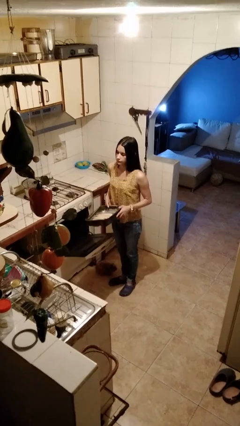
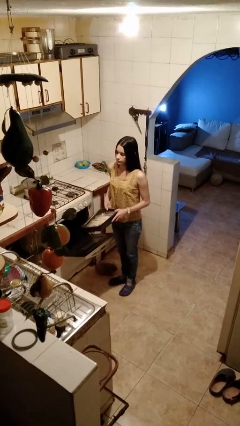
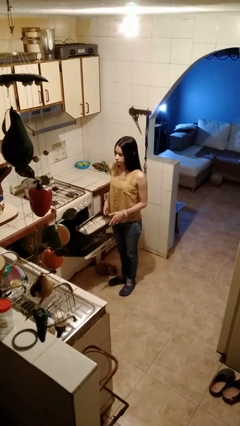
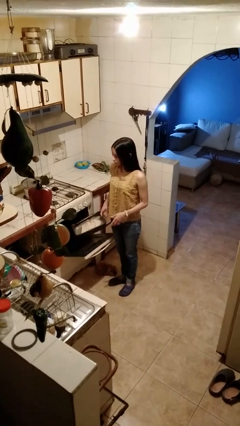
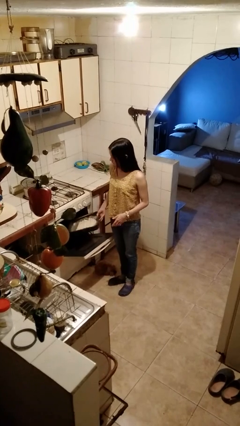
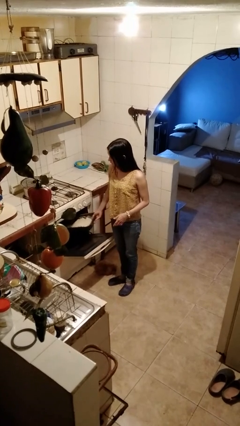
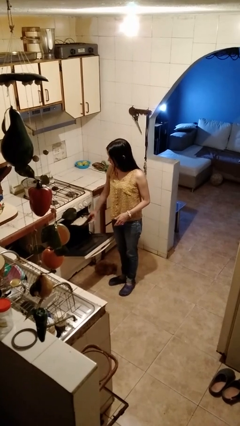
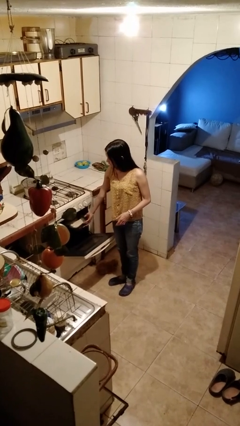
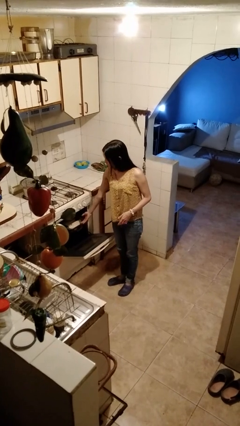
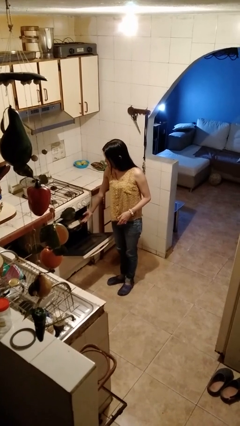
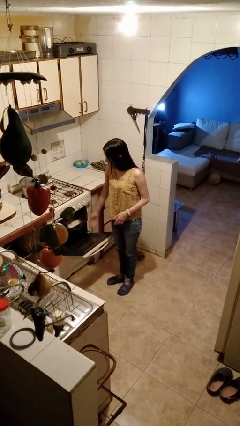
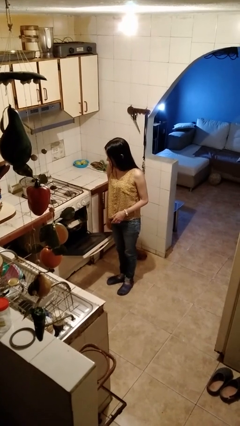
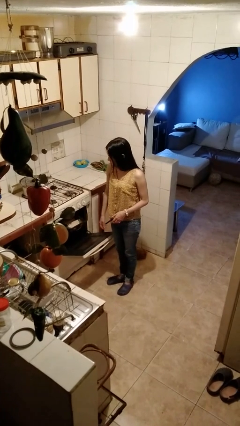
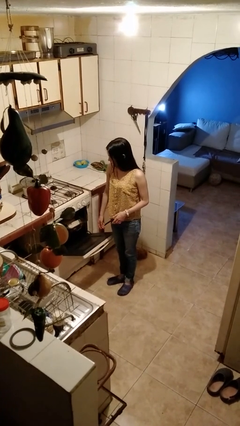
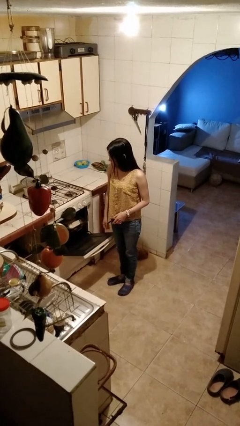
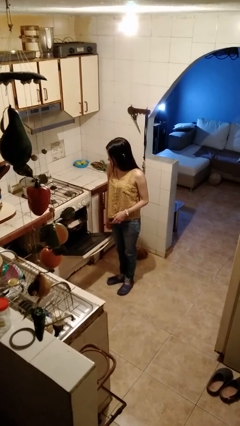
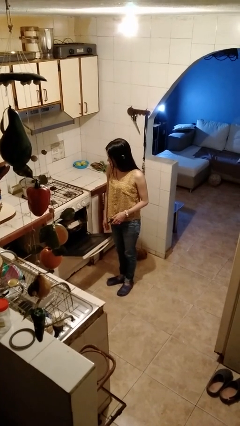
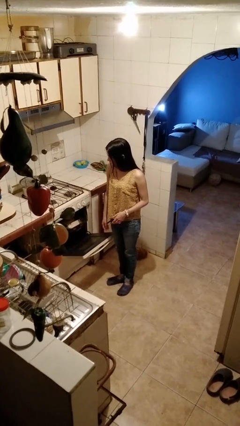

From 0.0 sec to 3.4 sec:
person puts object into oven

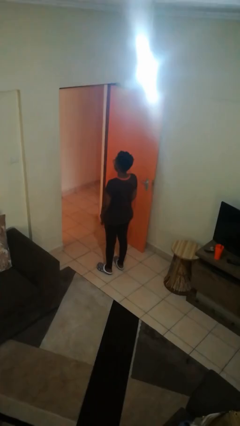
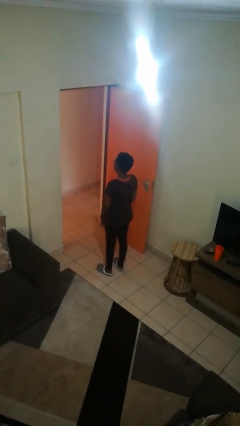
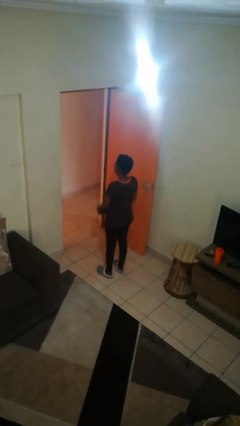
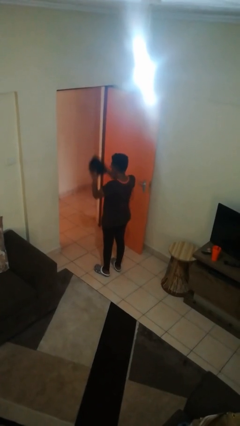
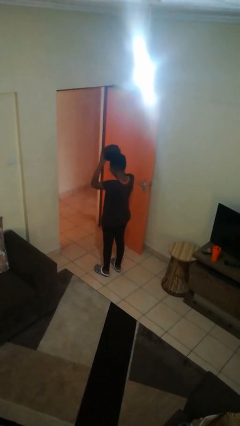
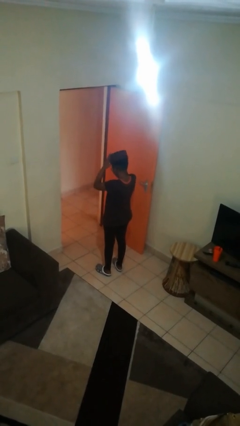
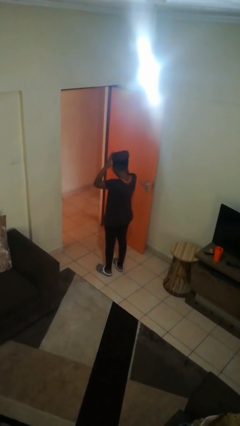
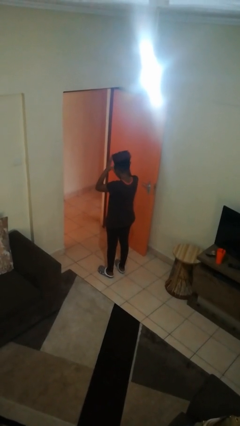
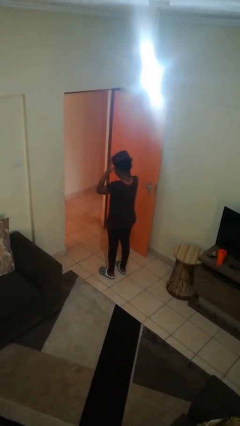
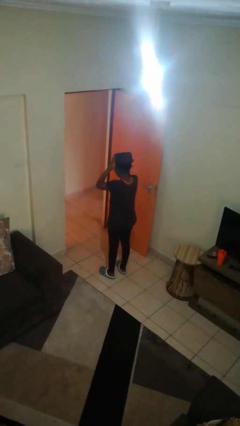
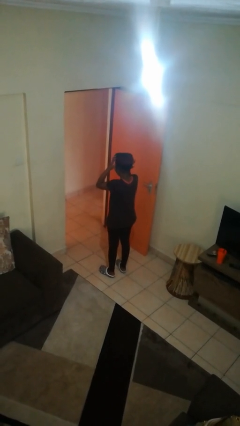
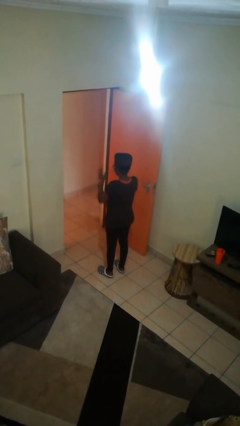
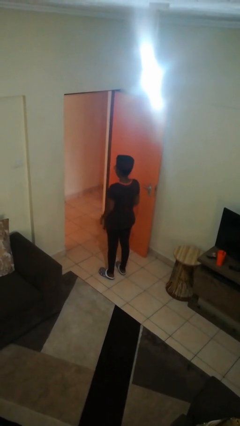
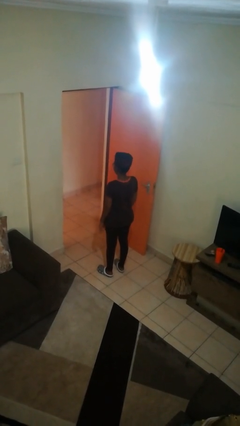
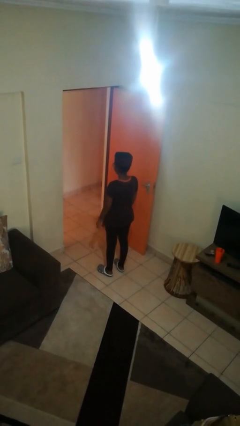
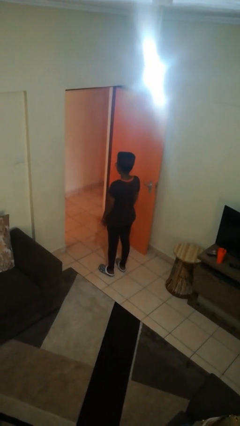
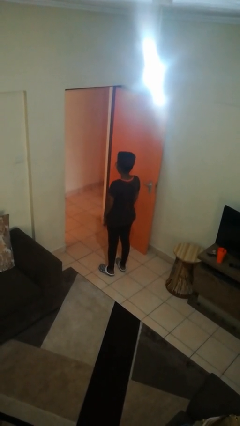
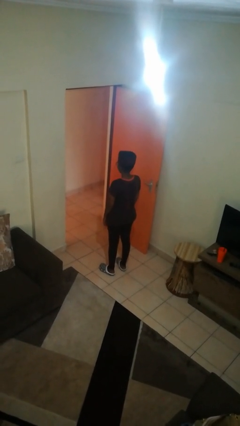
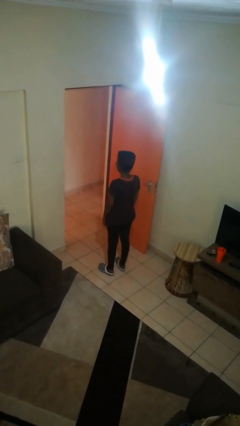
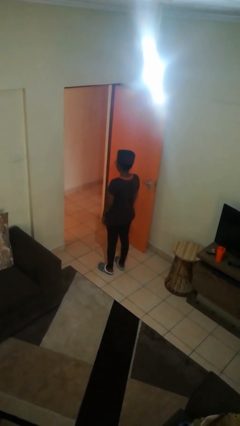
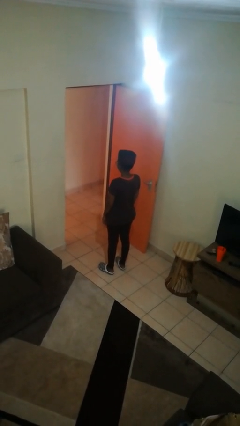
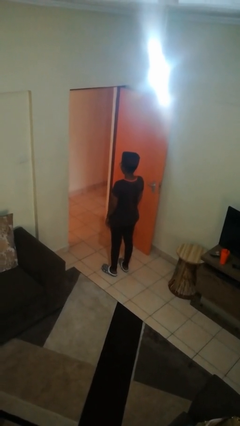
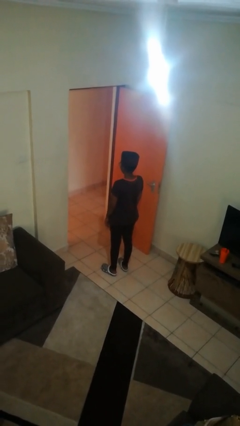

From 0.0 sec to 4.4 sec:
person puts on hat

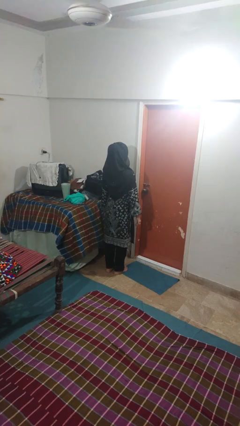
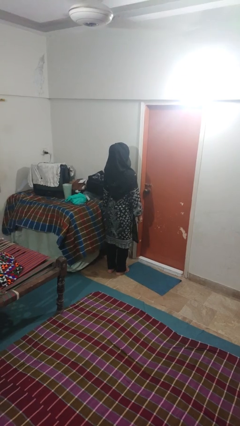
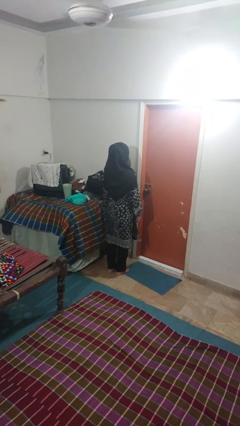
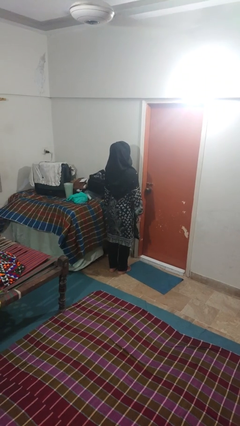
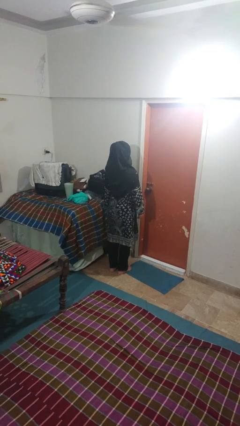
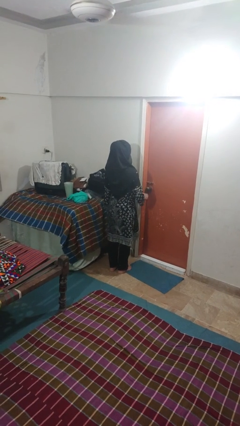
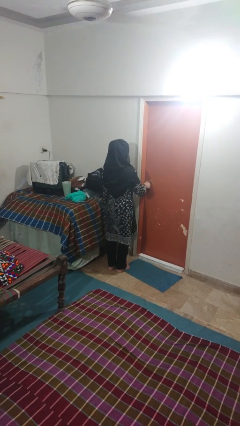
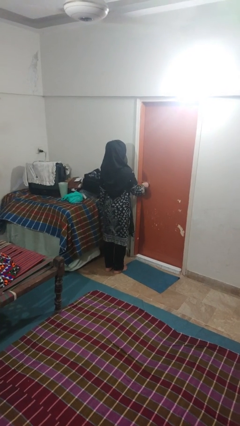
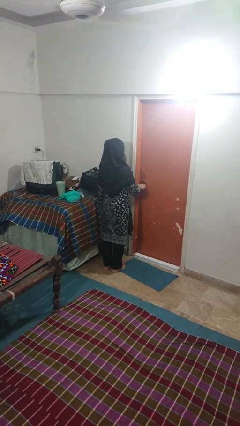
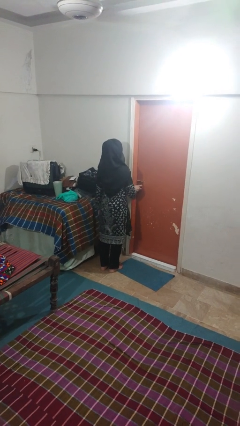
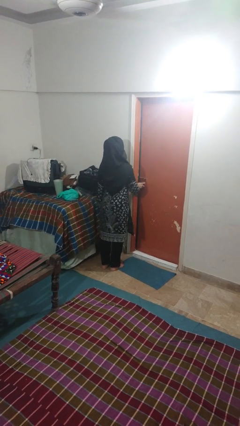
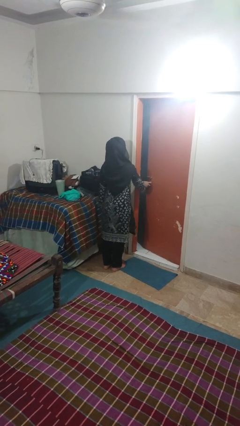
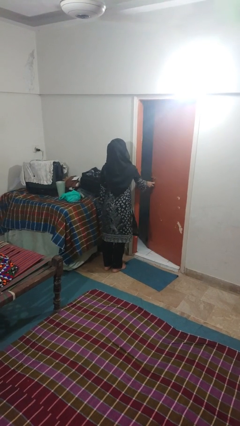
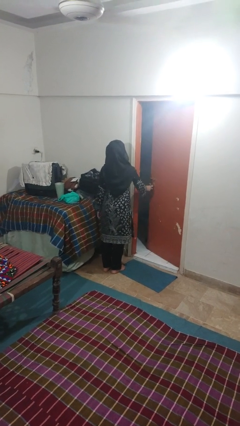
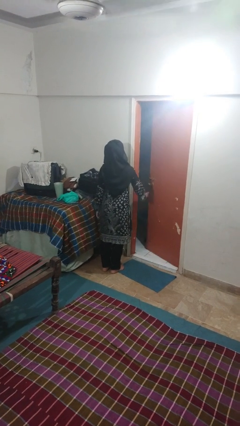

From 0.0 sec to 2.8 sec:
person opens facility door

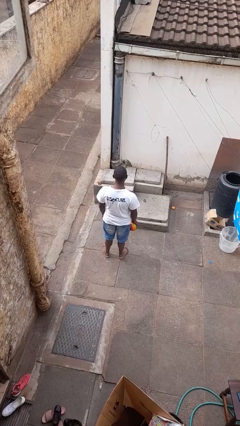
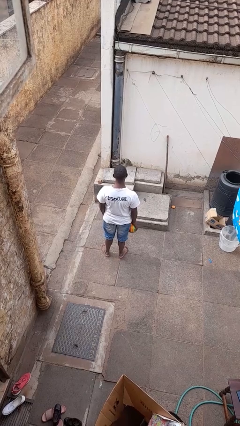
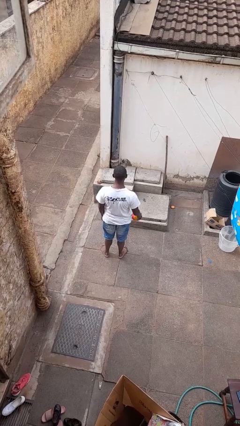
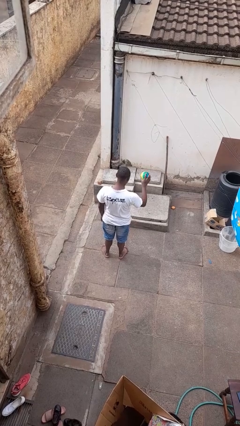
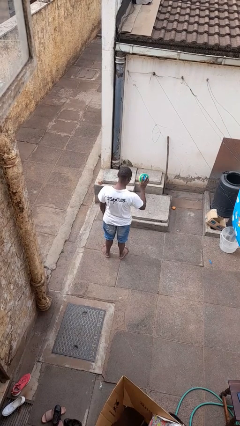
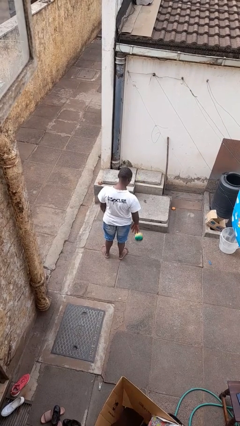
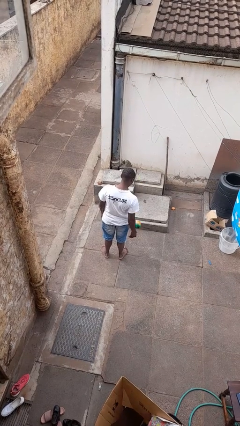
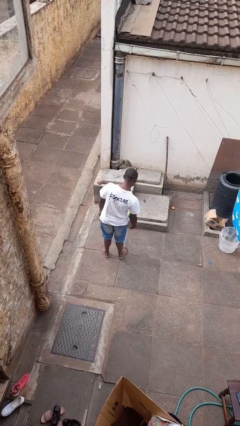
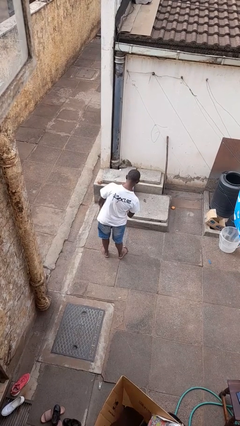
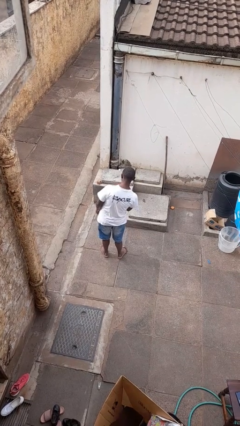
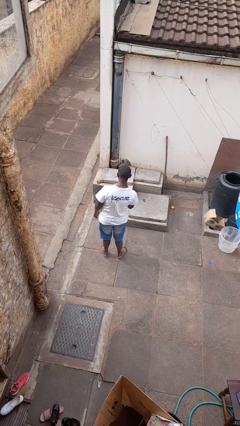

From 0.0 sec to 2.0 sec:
person bounces ball on floor

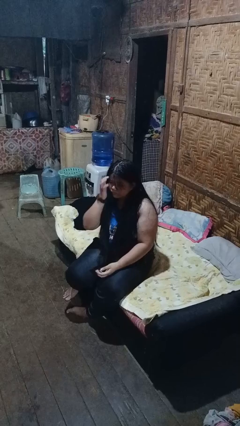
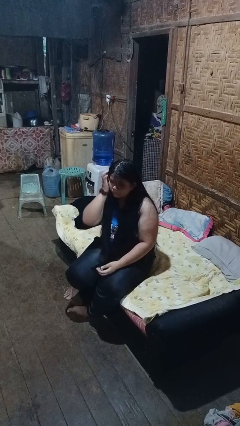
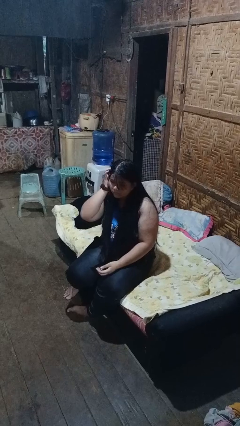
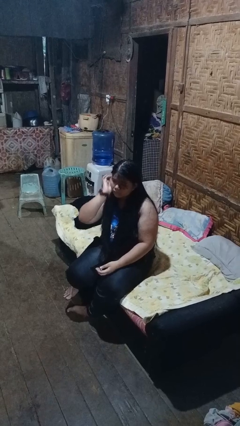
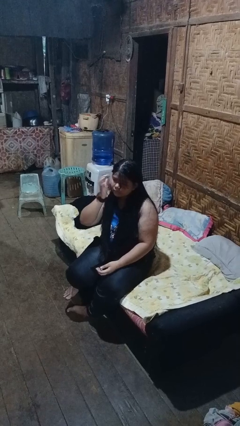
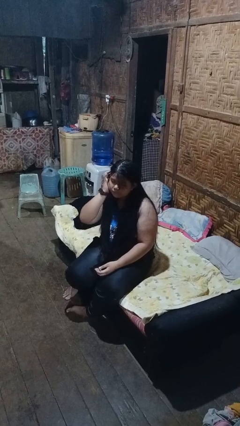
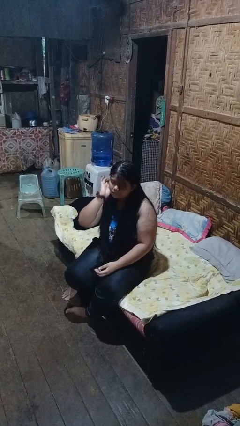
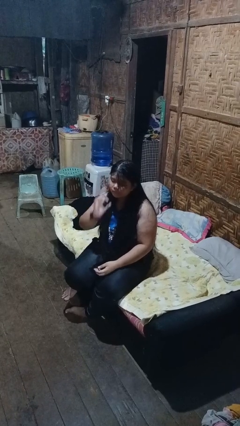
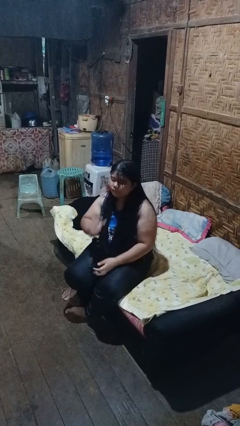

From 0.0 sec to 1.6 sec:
person strokes hair

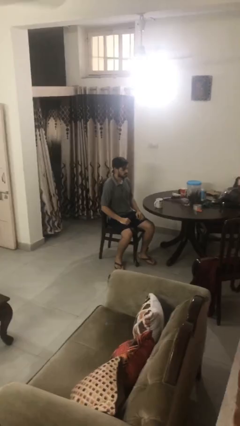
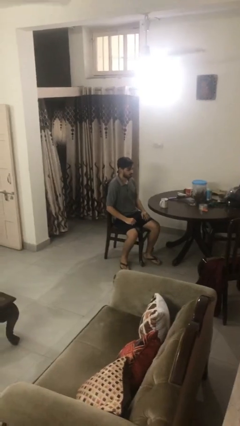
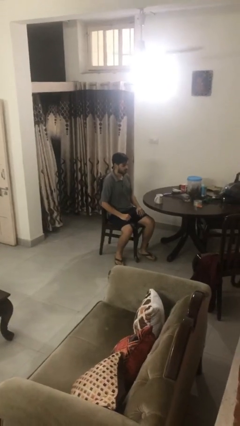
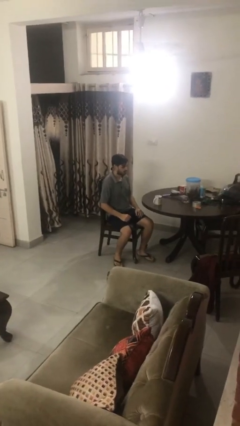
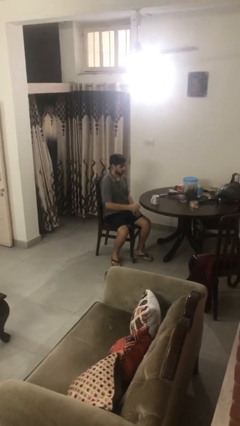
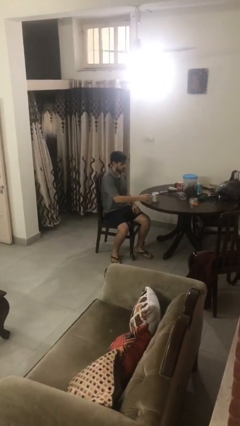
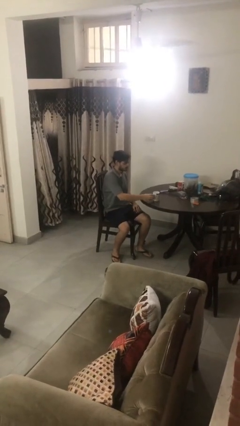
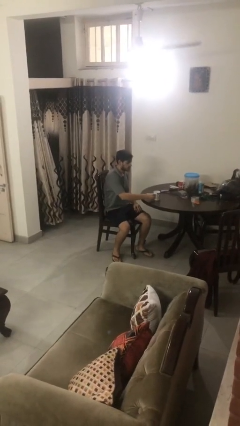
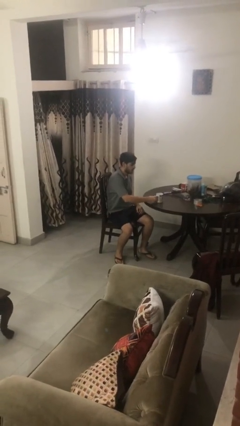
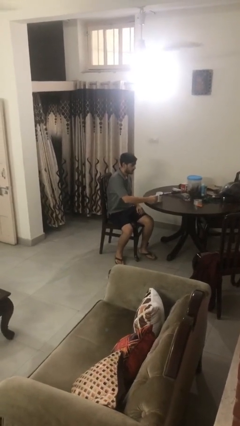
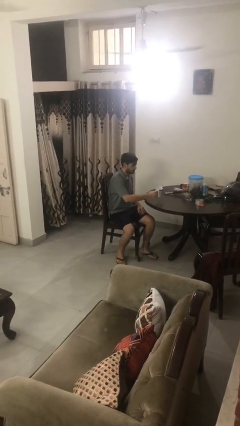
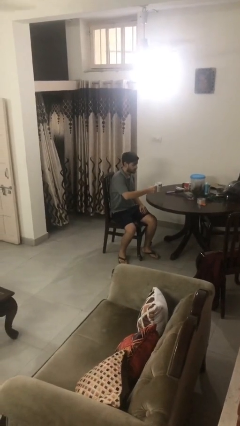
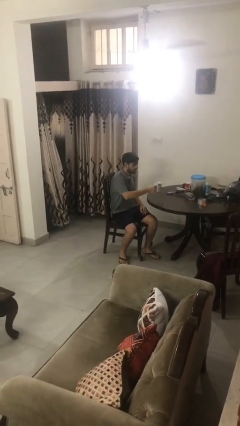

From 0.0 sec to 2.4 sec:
person picks up object from table

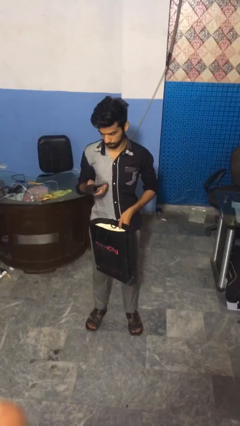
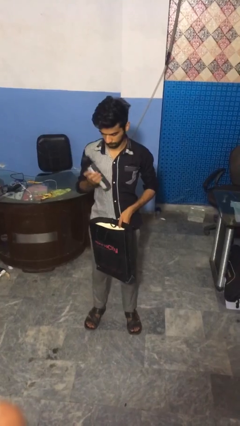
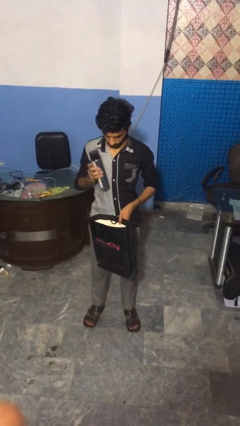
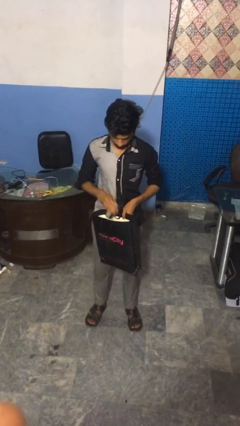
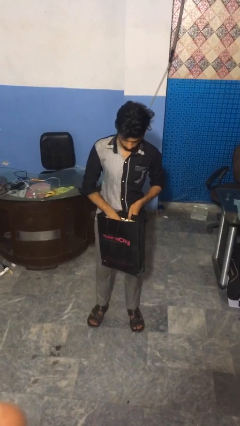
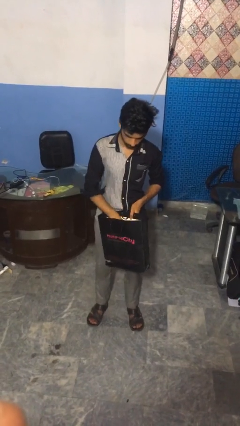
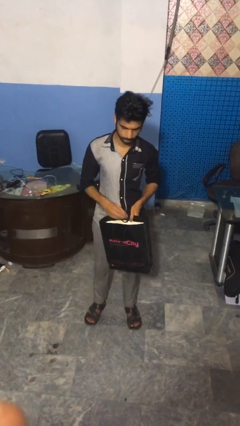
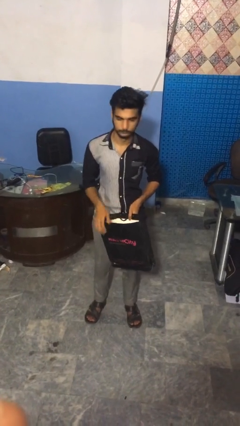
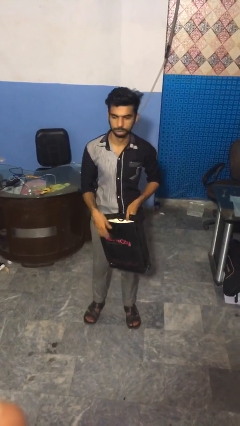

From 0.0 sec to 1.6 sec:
person puts object into bag
